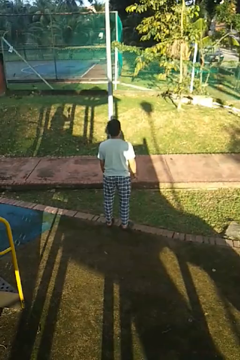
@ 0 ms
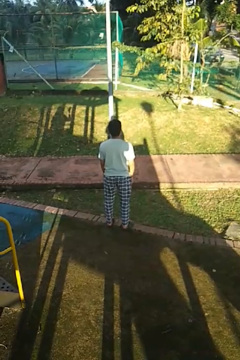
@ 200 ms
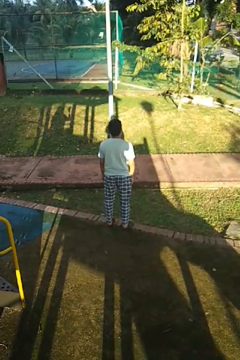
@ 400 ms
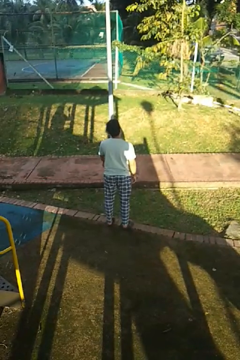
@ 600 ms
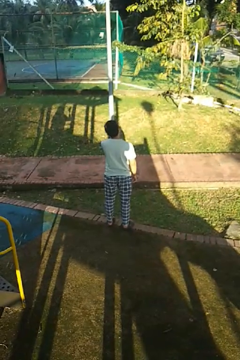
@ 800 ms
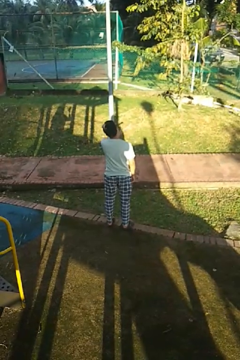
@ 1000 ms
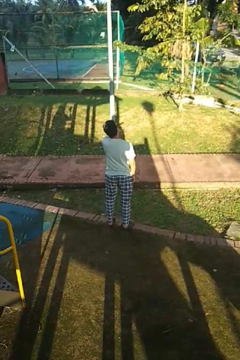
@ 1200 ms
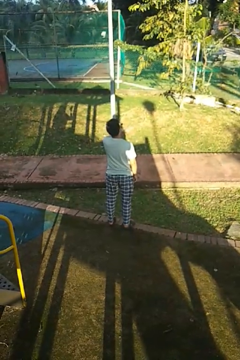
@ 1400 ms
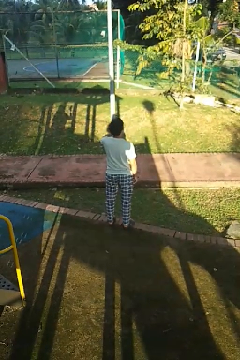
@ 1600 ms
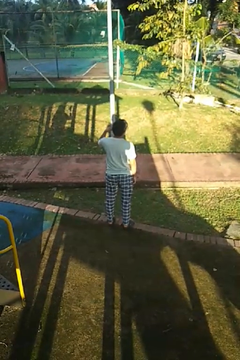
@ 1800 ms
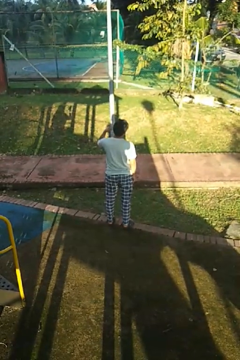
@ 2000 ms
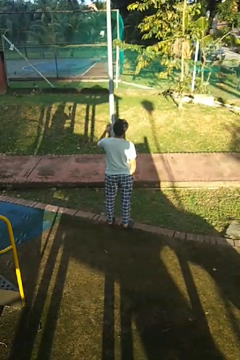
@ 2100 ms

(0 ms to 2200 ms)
person gestures cut

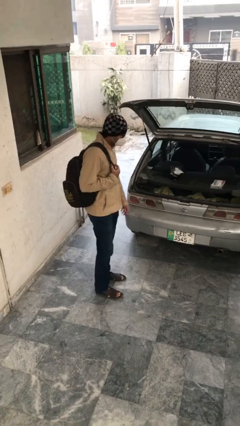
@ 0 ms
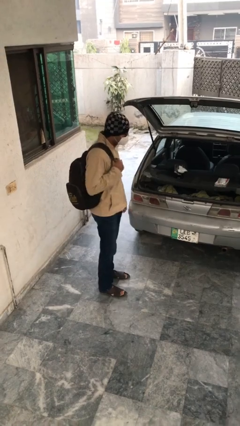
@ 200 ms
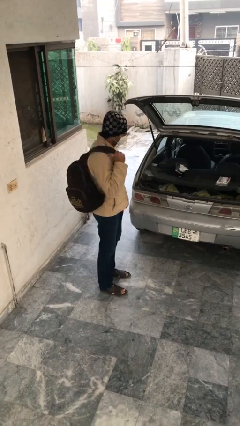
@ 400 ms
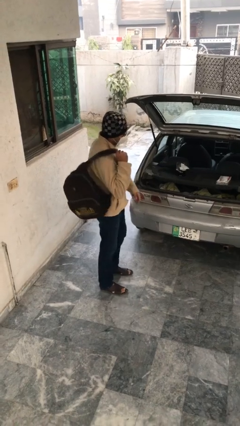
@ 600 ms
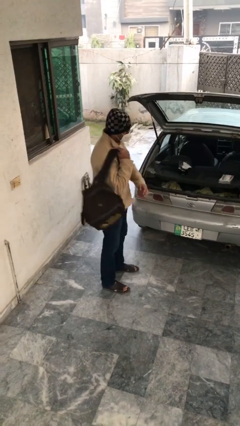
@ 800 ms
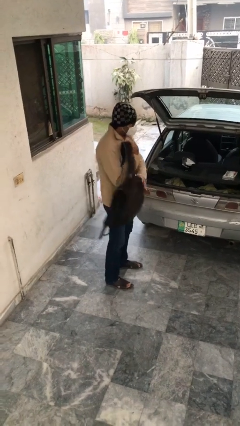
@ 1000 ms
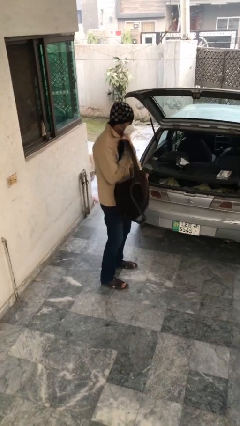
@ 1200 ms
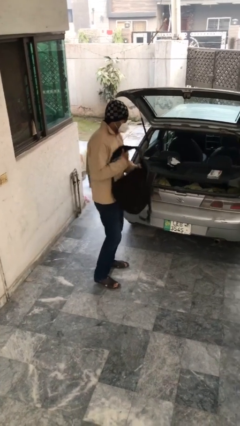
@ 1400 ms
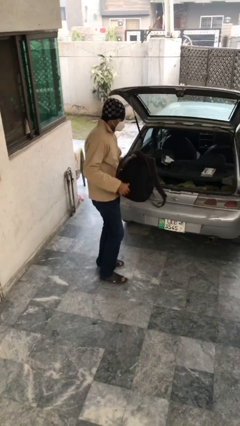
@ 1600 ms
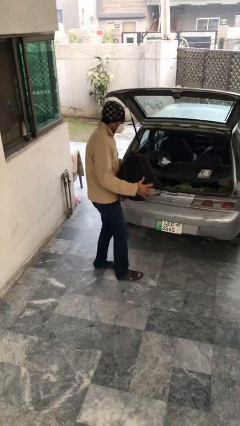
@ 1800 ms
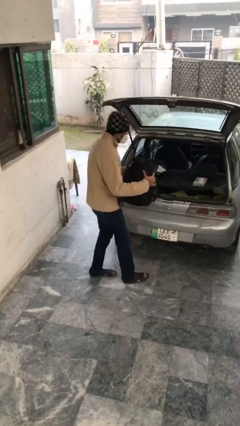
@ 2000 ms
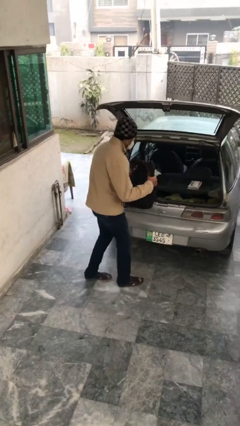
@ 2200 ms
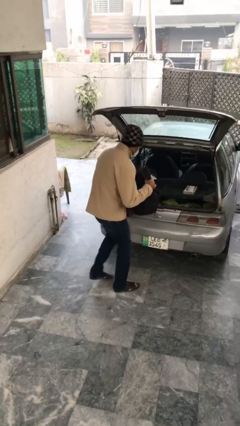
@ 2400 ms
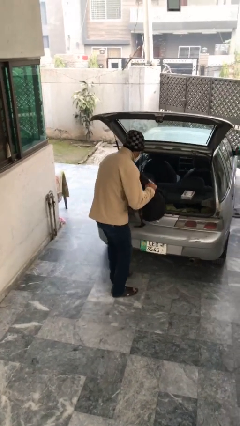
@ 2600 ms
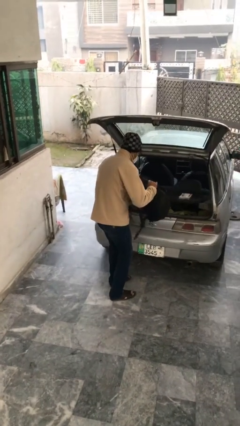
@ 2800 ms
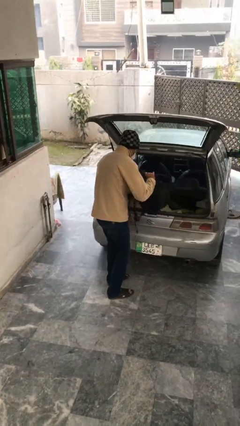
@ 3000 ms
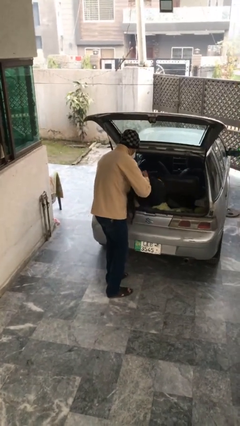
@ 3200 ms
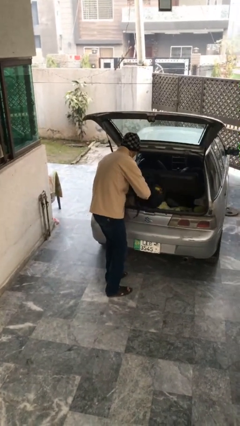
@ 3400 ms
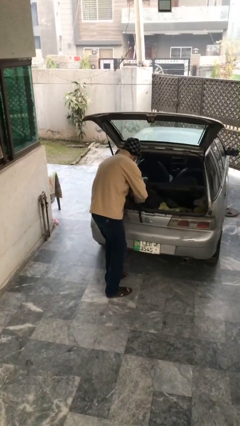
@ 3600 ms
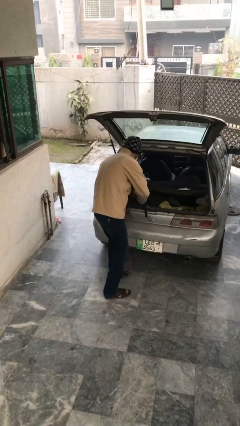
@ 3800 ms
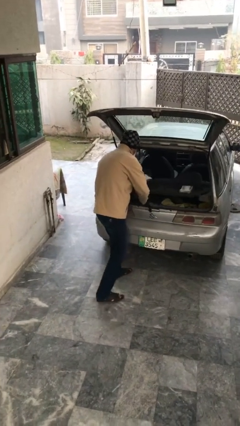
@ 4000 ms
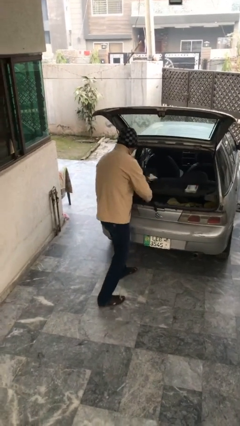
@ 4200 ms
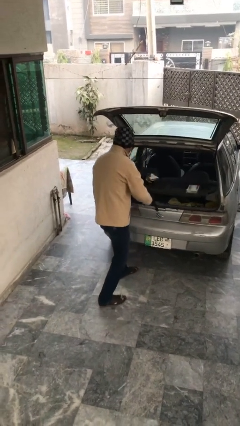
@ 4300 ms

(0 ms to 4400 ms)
person loads car

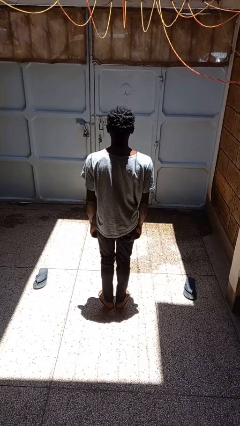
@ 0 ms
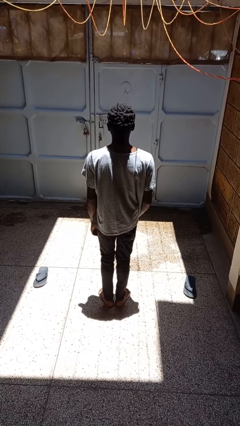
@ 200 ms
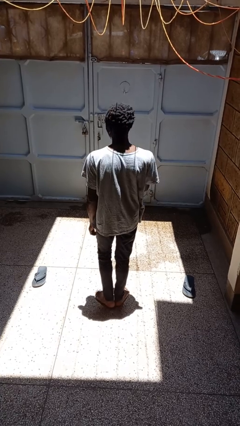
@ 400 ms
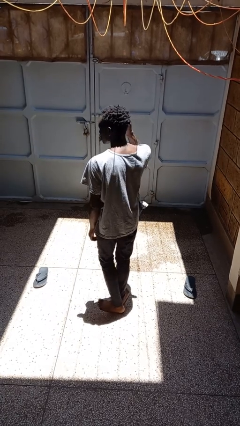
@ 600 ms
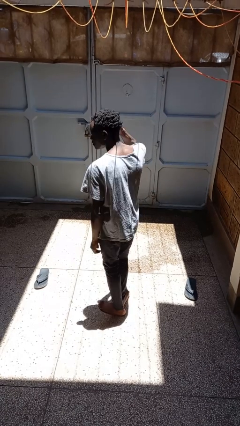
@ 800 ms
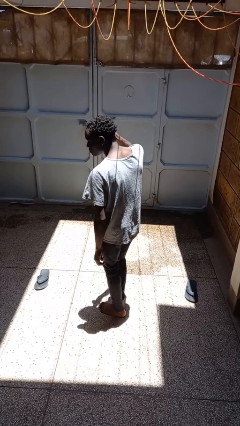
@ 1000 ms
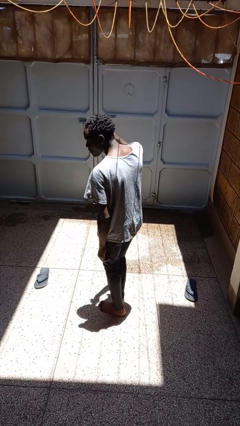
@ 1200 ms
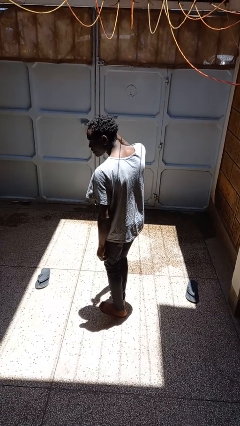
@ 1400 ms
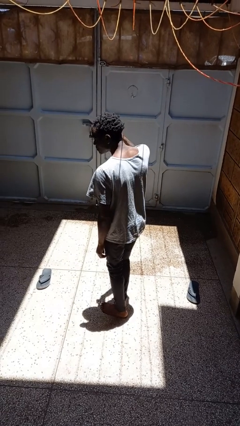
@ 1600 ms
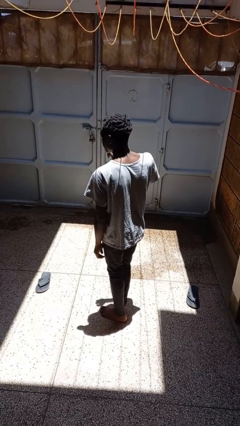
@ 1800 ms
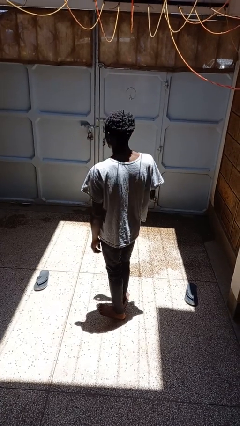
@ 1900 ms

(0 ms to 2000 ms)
person touches earlobe

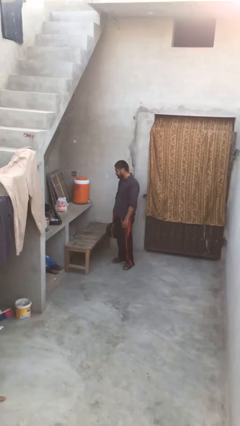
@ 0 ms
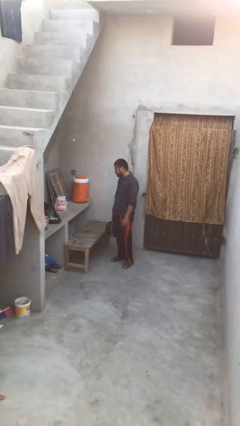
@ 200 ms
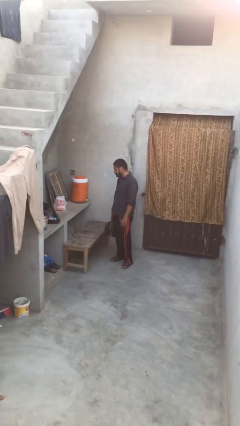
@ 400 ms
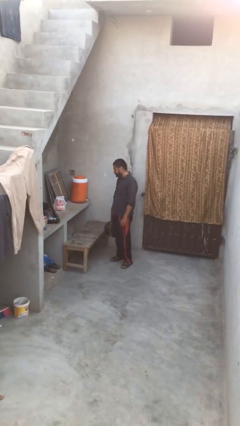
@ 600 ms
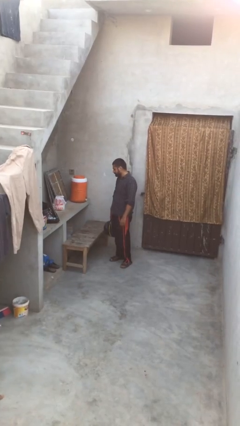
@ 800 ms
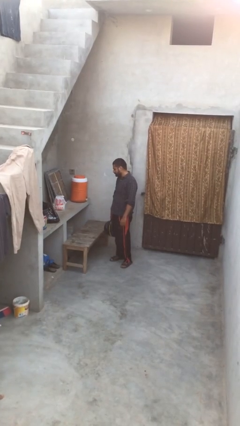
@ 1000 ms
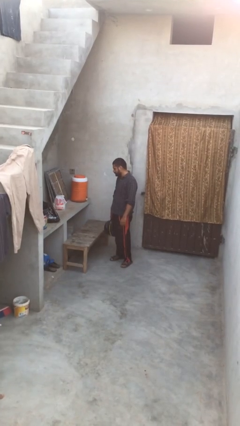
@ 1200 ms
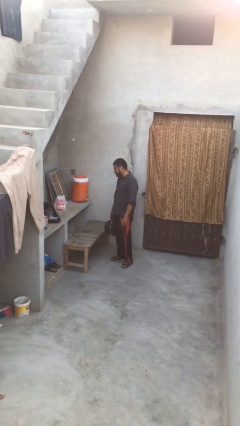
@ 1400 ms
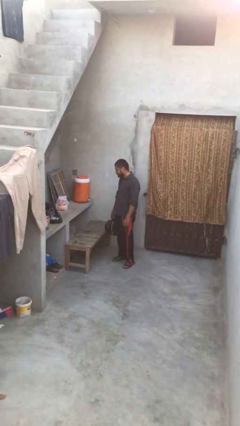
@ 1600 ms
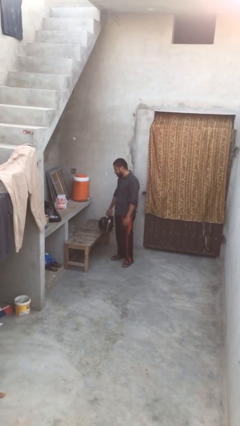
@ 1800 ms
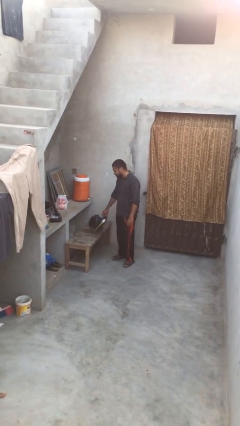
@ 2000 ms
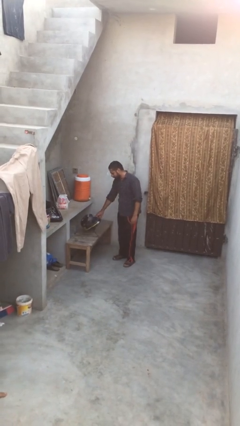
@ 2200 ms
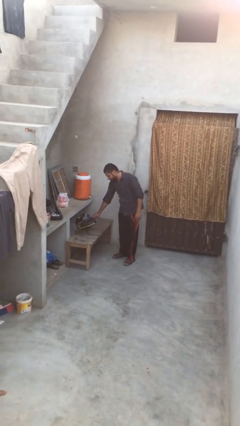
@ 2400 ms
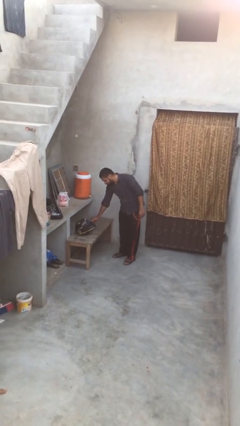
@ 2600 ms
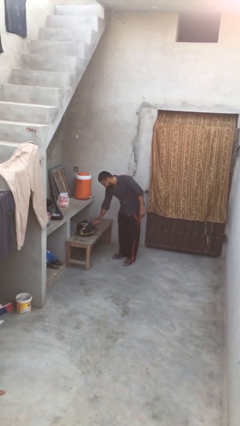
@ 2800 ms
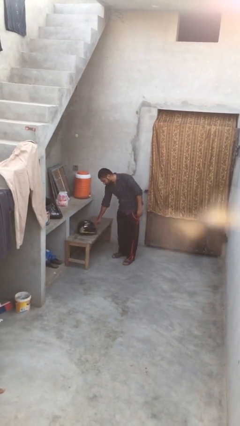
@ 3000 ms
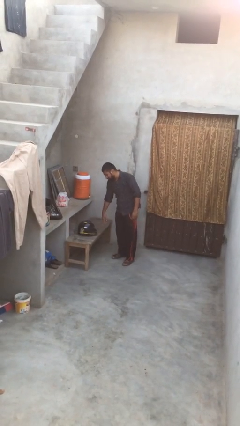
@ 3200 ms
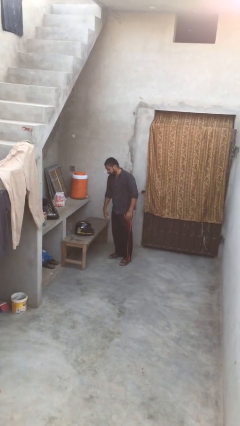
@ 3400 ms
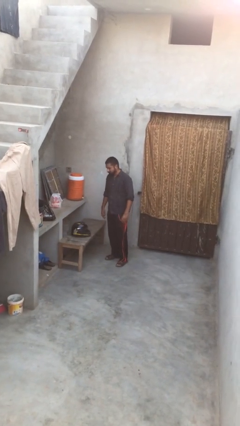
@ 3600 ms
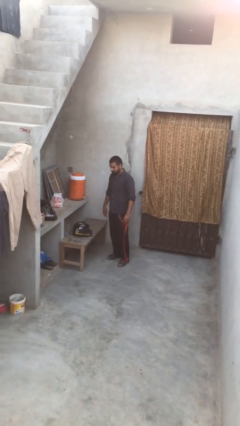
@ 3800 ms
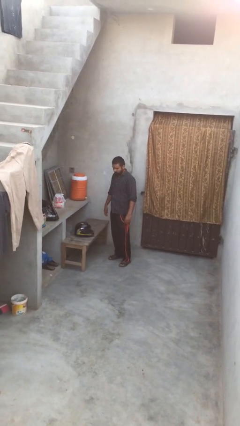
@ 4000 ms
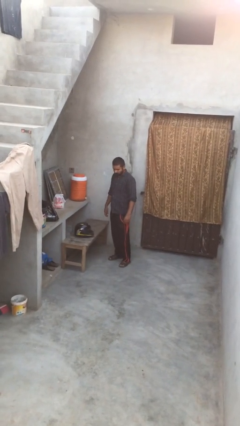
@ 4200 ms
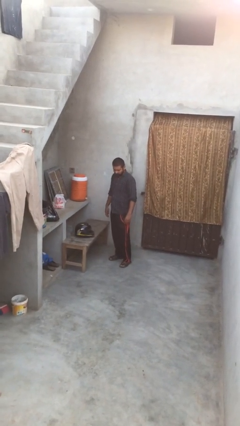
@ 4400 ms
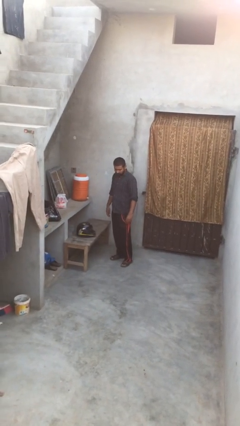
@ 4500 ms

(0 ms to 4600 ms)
person puts down object on table

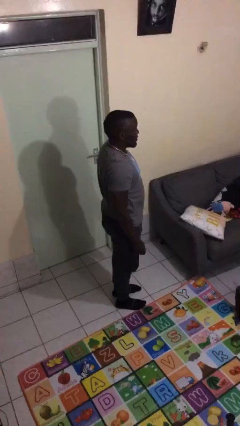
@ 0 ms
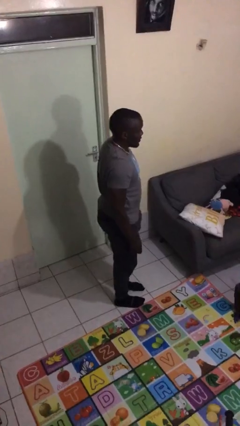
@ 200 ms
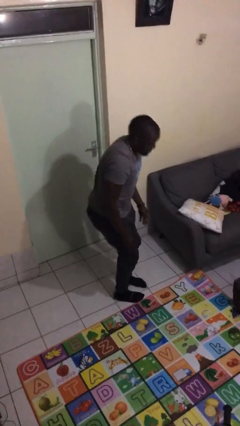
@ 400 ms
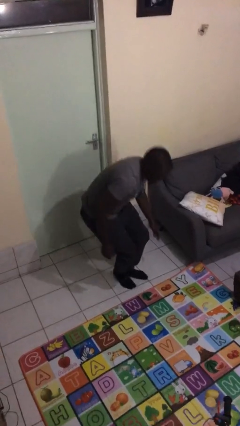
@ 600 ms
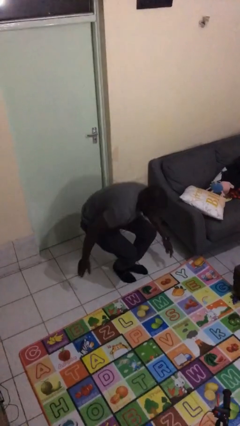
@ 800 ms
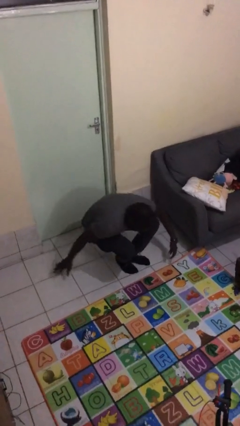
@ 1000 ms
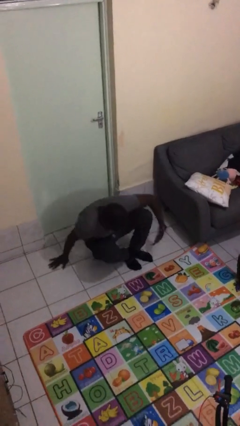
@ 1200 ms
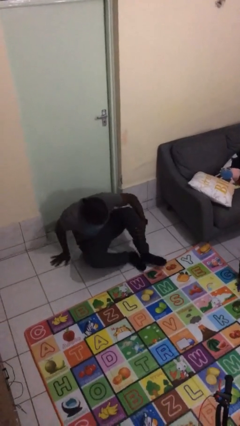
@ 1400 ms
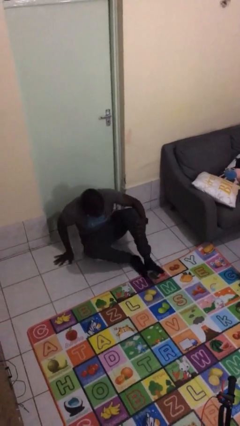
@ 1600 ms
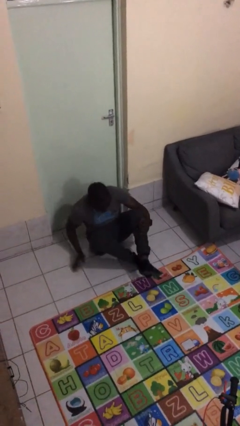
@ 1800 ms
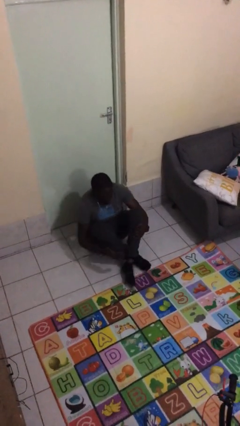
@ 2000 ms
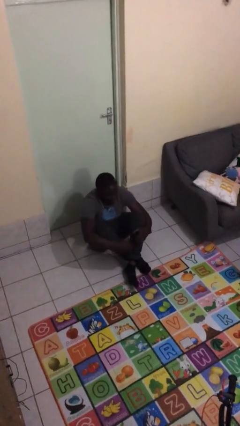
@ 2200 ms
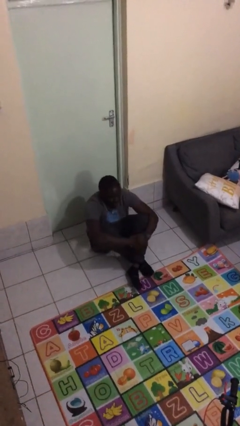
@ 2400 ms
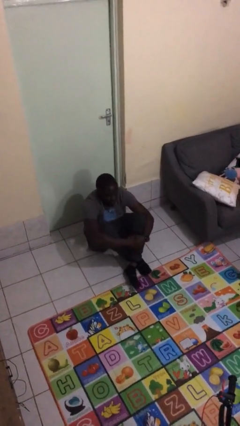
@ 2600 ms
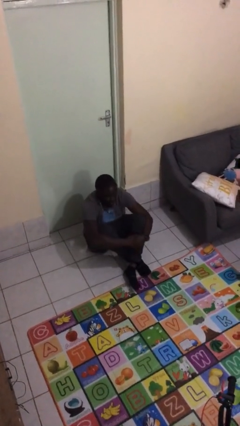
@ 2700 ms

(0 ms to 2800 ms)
person sits crisscross

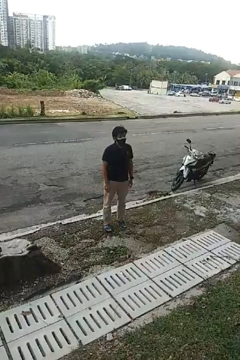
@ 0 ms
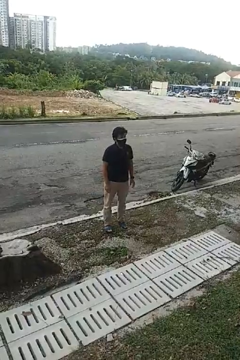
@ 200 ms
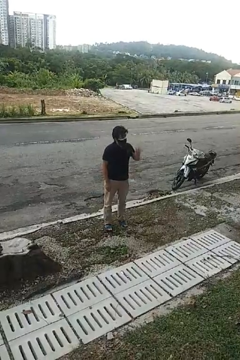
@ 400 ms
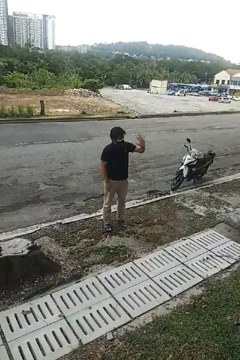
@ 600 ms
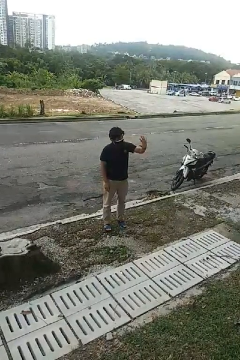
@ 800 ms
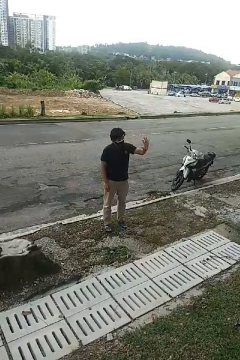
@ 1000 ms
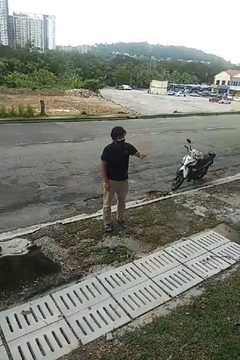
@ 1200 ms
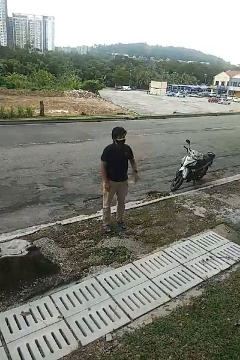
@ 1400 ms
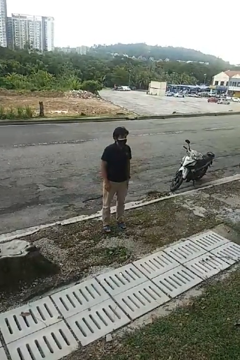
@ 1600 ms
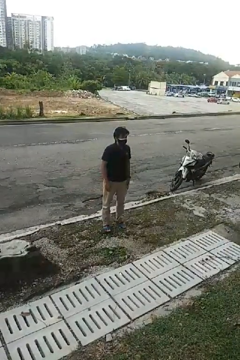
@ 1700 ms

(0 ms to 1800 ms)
person gestures number five

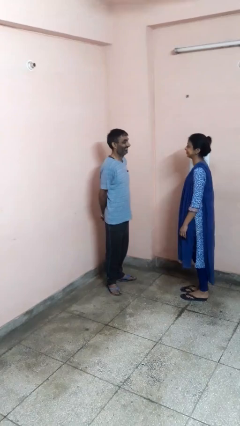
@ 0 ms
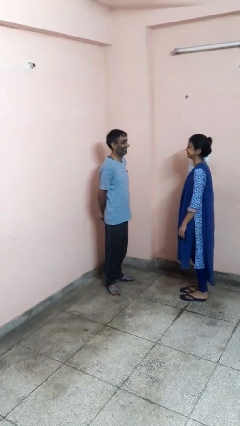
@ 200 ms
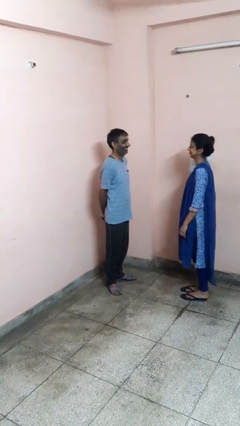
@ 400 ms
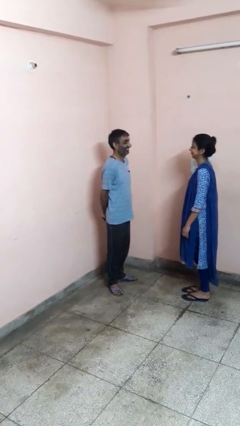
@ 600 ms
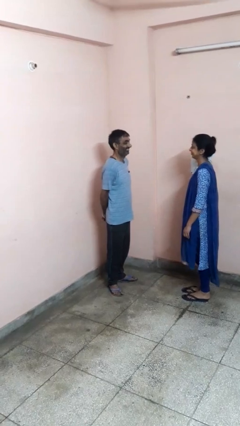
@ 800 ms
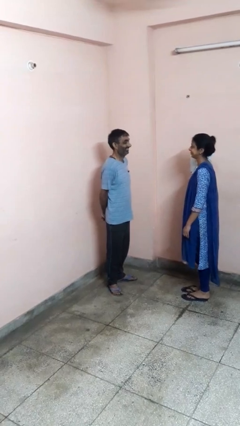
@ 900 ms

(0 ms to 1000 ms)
person laughs with person
